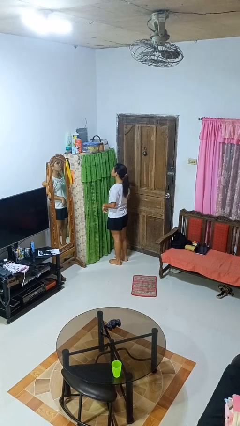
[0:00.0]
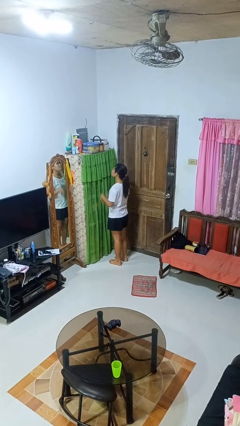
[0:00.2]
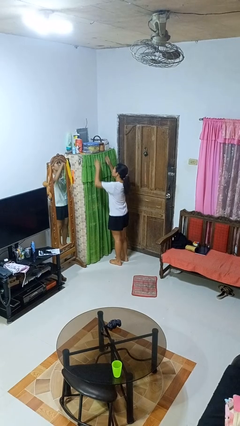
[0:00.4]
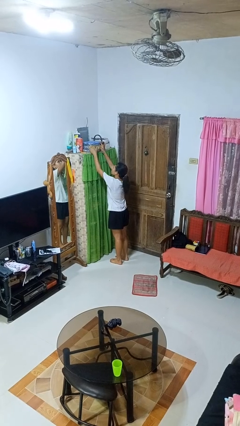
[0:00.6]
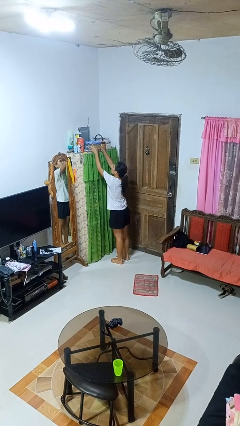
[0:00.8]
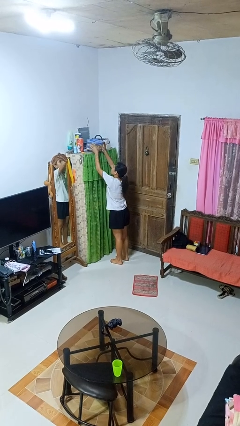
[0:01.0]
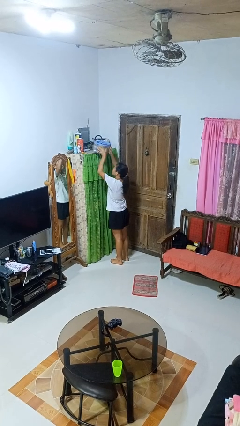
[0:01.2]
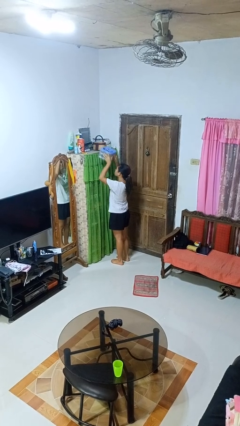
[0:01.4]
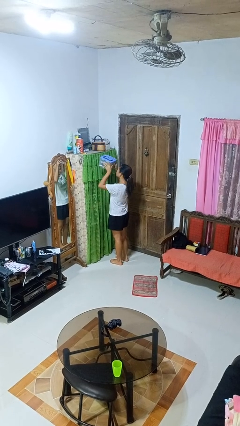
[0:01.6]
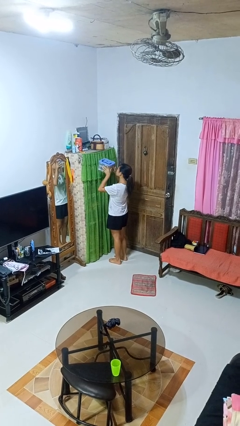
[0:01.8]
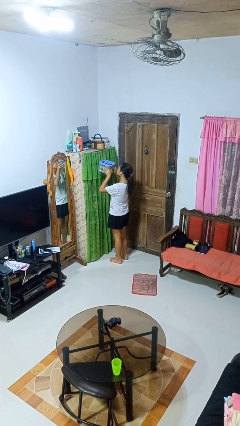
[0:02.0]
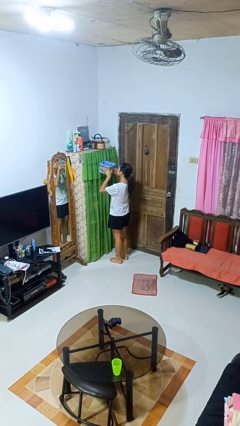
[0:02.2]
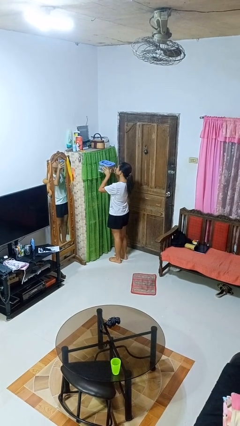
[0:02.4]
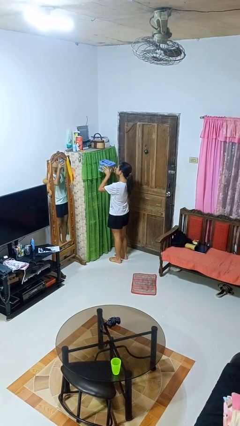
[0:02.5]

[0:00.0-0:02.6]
person picks up object from shelf

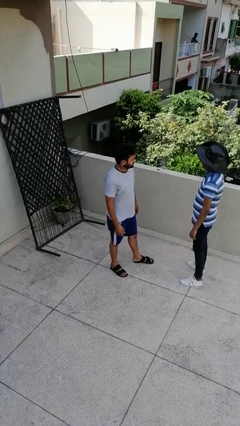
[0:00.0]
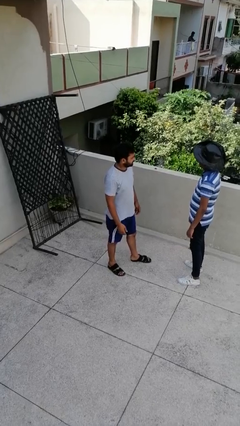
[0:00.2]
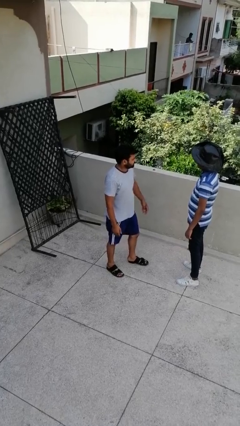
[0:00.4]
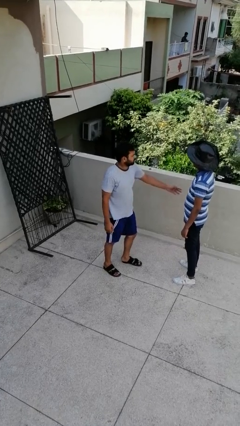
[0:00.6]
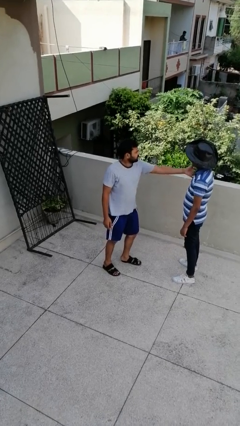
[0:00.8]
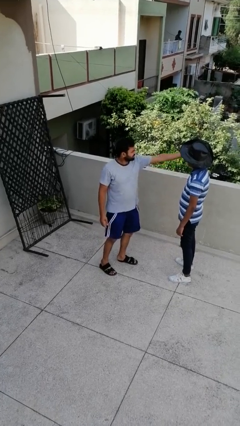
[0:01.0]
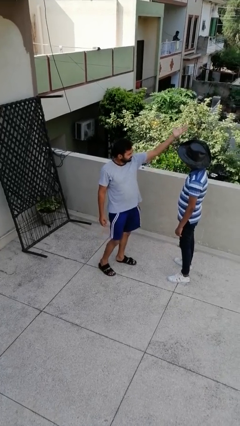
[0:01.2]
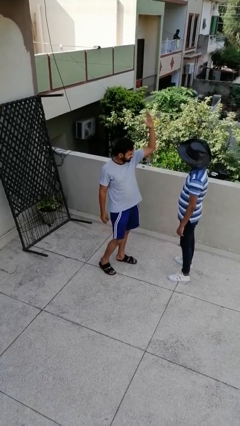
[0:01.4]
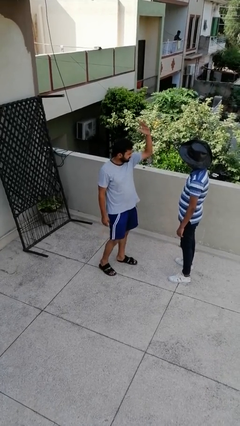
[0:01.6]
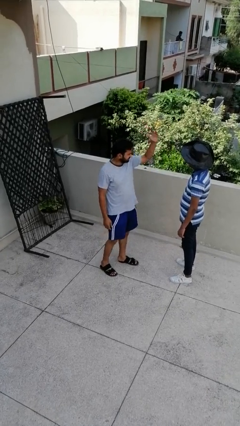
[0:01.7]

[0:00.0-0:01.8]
person shoves person

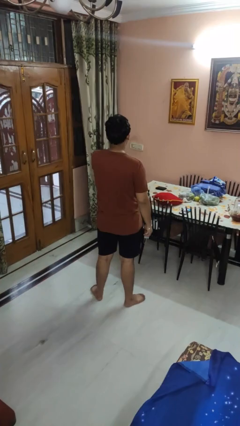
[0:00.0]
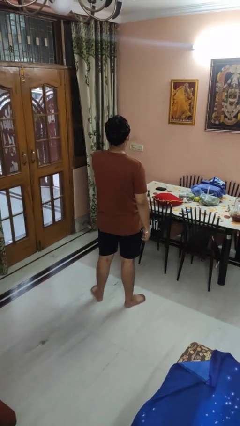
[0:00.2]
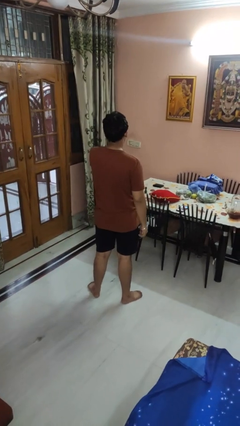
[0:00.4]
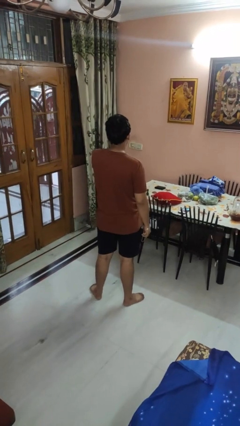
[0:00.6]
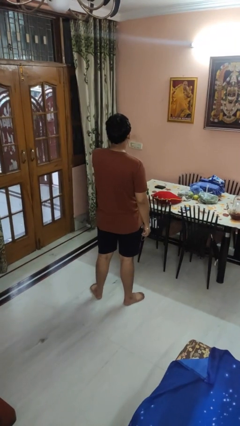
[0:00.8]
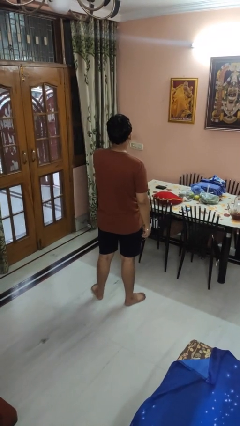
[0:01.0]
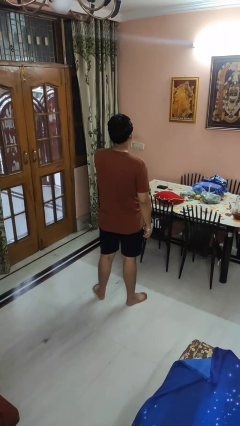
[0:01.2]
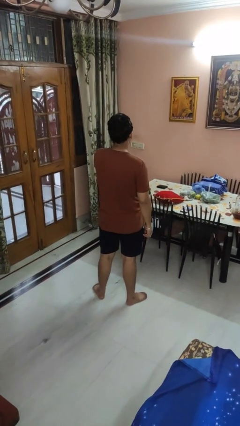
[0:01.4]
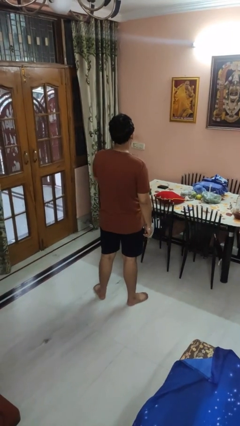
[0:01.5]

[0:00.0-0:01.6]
person gestures watch closely

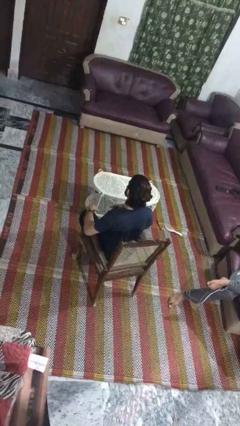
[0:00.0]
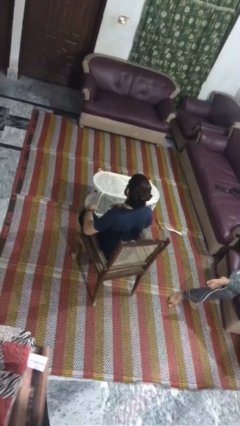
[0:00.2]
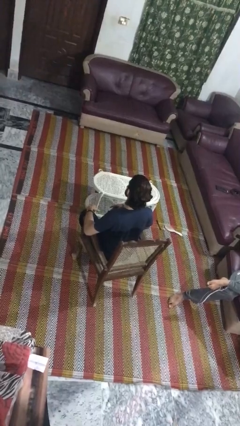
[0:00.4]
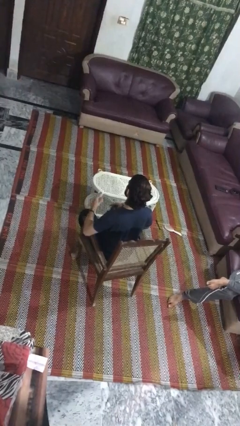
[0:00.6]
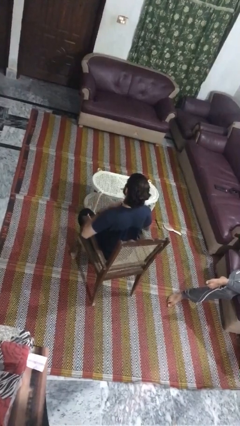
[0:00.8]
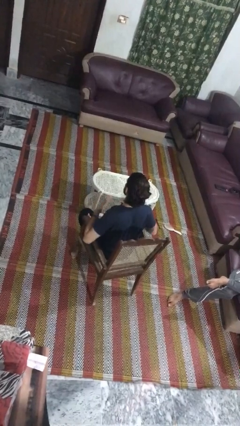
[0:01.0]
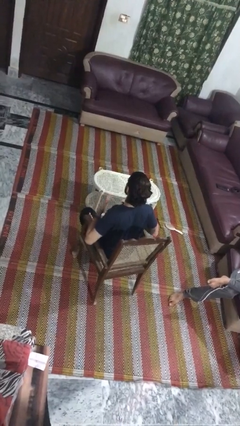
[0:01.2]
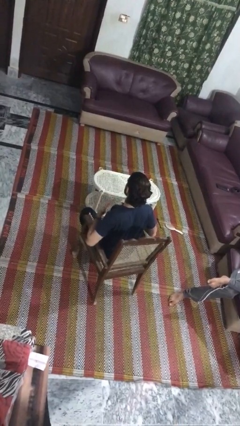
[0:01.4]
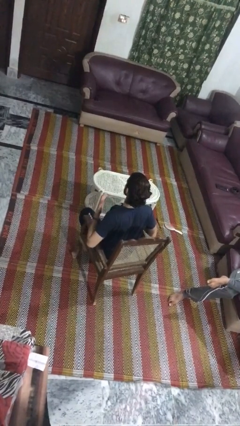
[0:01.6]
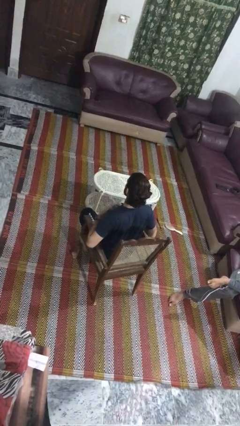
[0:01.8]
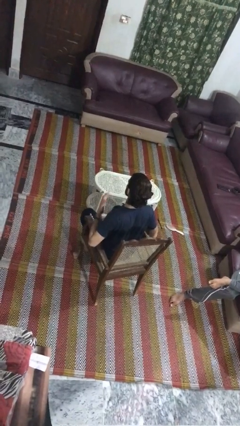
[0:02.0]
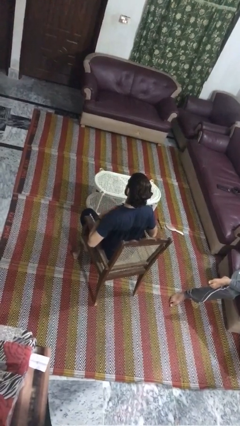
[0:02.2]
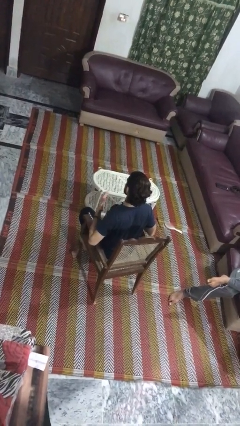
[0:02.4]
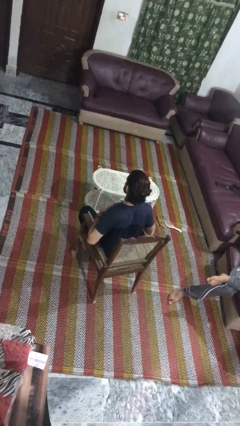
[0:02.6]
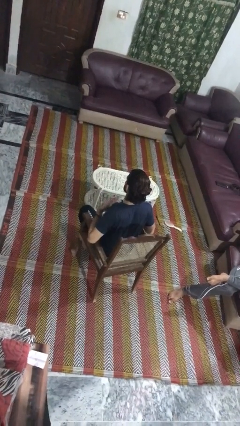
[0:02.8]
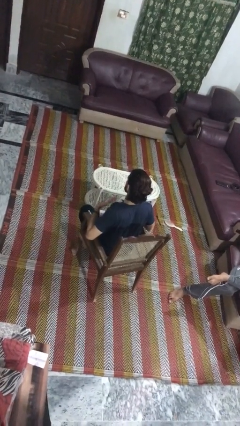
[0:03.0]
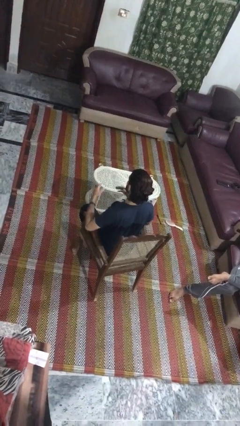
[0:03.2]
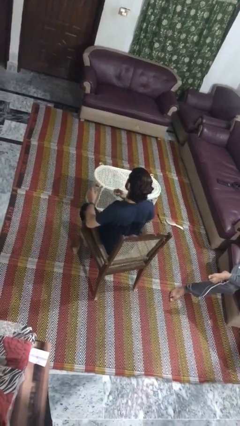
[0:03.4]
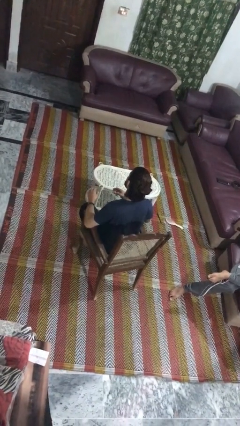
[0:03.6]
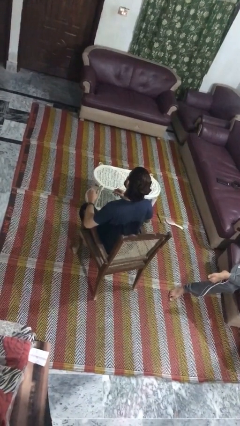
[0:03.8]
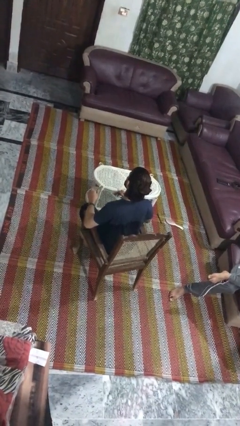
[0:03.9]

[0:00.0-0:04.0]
person drums on chest

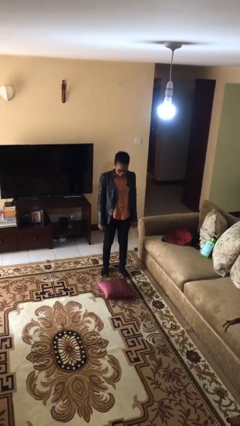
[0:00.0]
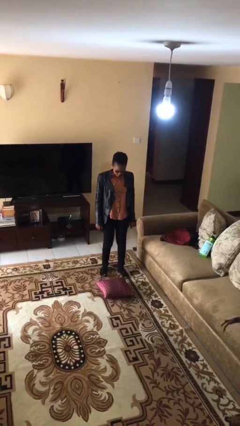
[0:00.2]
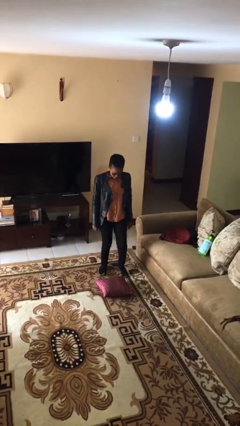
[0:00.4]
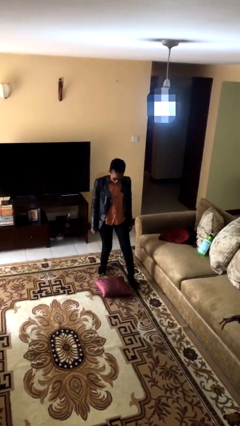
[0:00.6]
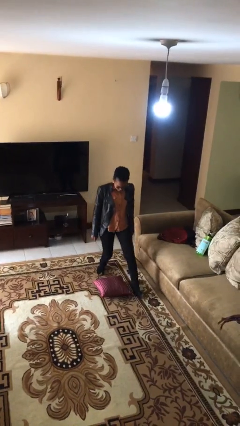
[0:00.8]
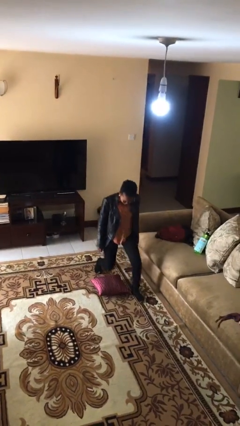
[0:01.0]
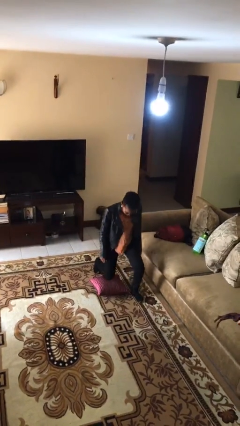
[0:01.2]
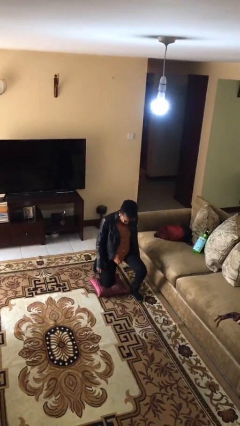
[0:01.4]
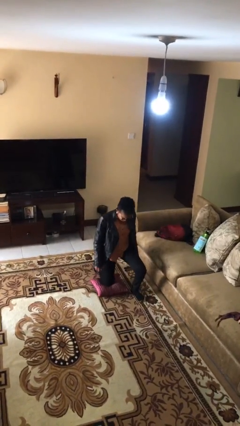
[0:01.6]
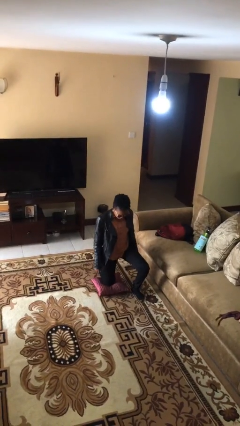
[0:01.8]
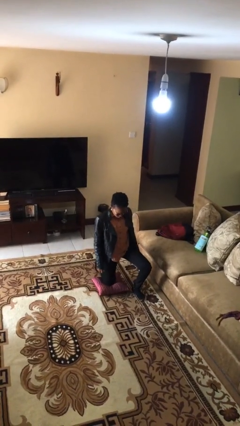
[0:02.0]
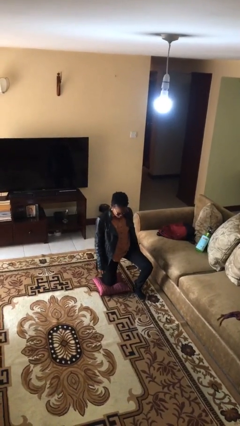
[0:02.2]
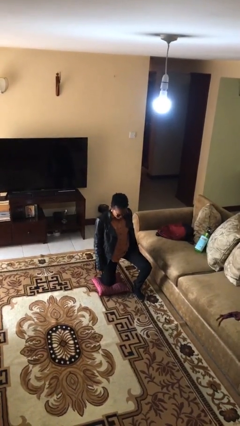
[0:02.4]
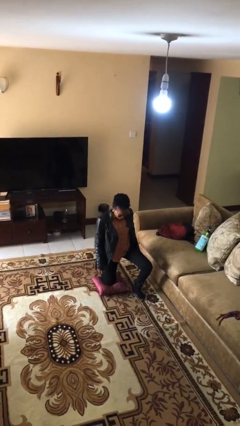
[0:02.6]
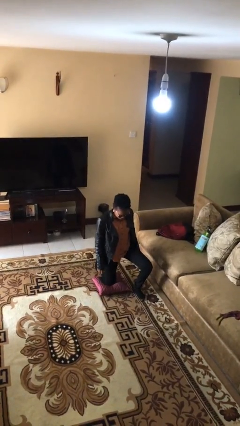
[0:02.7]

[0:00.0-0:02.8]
person kneels

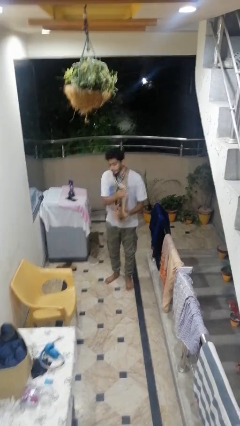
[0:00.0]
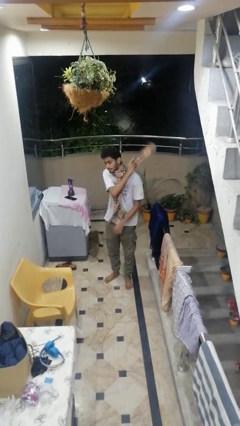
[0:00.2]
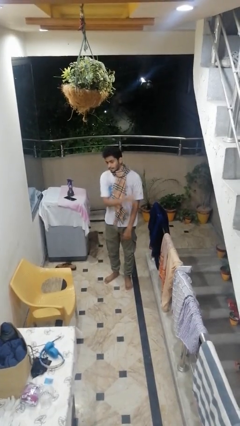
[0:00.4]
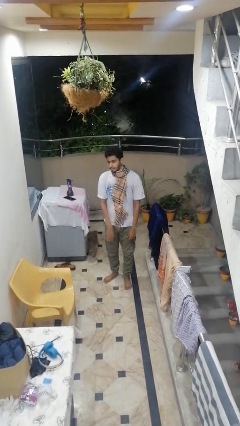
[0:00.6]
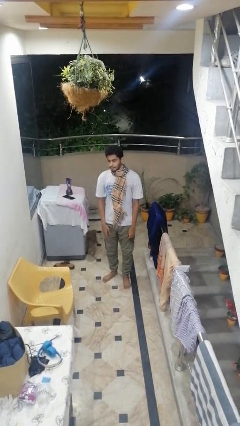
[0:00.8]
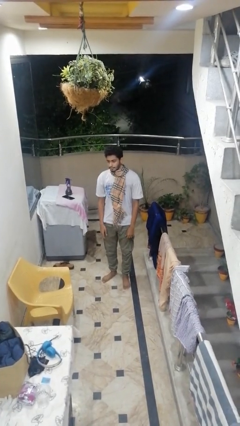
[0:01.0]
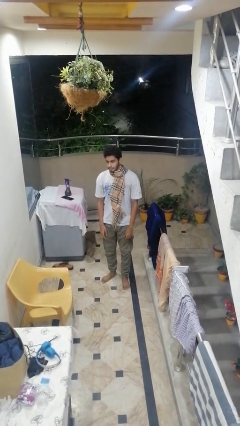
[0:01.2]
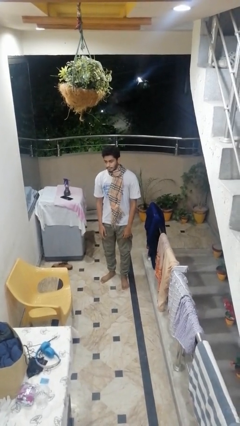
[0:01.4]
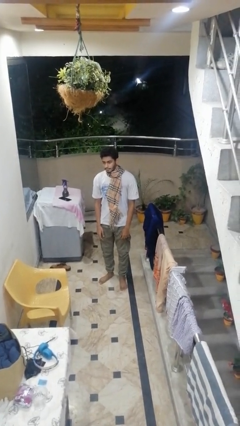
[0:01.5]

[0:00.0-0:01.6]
person puts on scarf

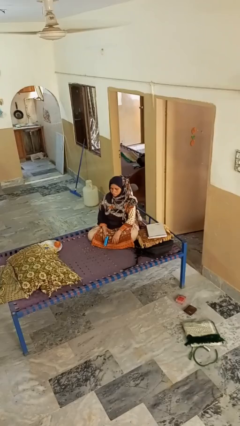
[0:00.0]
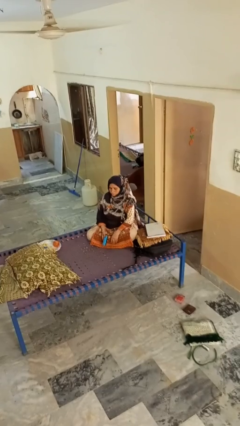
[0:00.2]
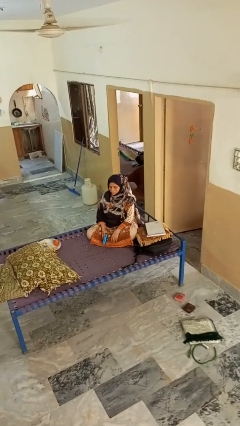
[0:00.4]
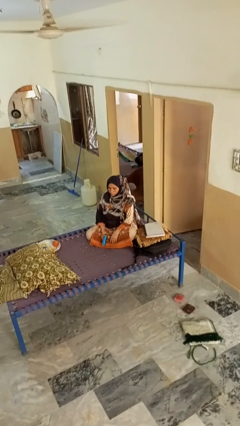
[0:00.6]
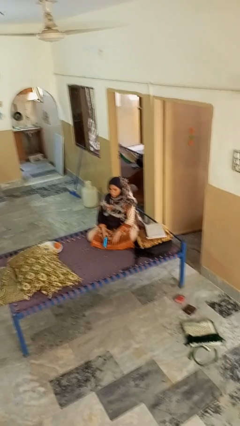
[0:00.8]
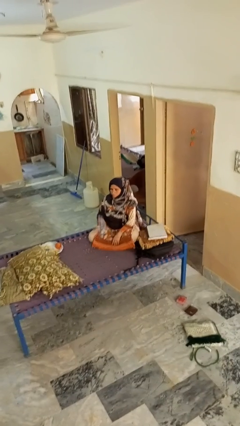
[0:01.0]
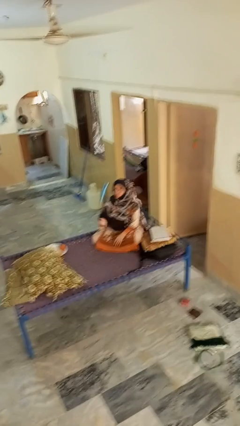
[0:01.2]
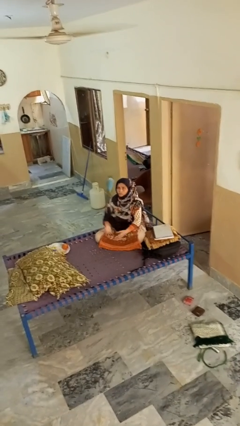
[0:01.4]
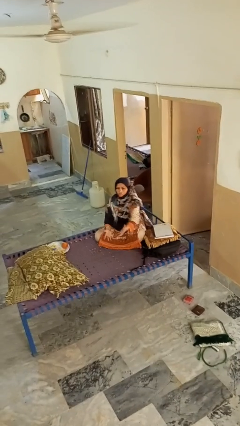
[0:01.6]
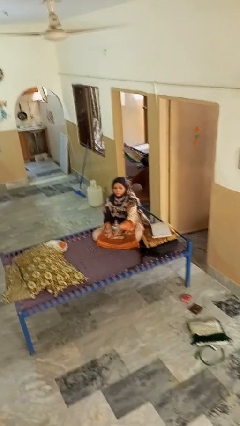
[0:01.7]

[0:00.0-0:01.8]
person drops object

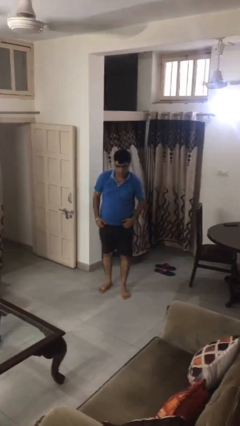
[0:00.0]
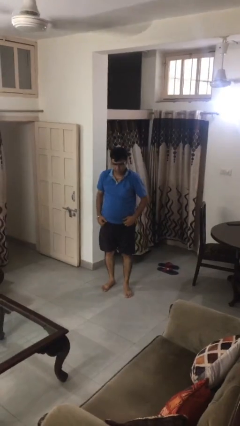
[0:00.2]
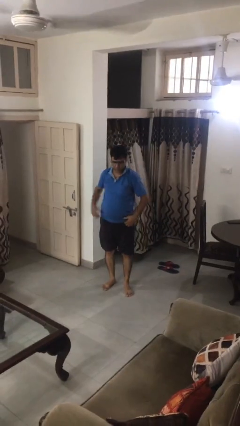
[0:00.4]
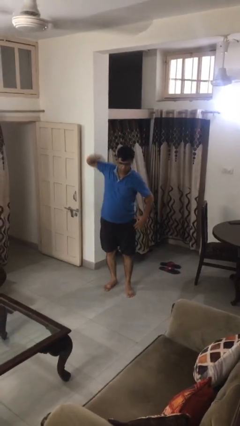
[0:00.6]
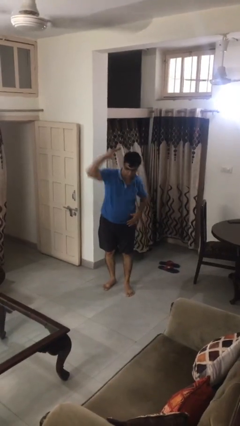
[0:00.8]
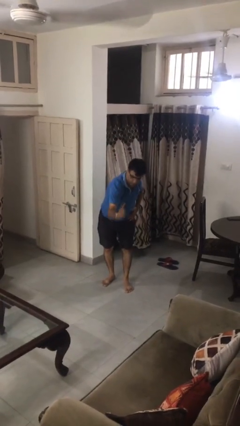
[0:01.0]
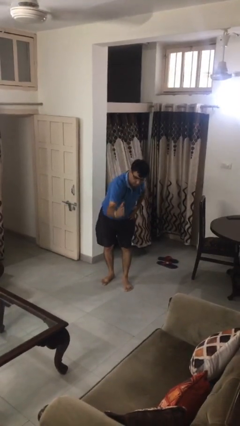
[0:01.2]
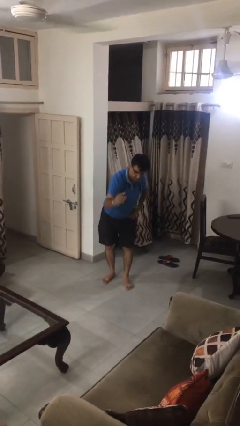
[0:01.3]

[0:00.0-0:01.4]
person karate chop
